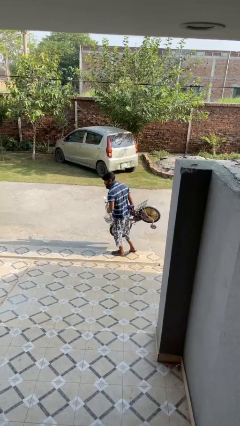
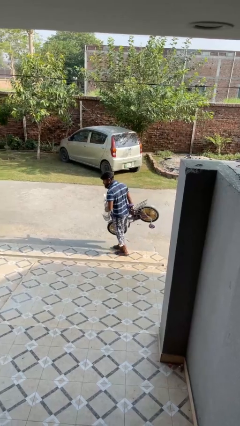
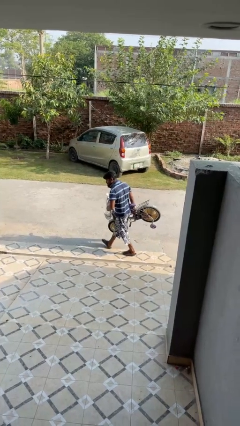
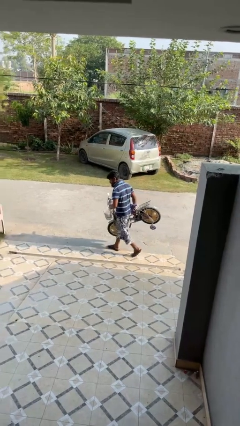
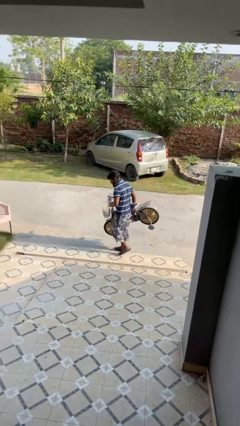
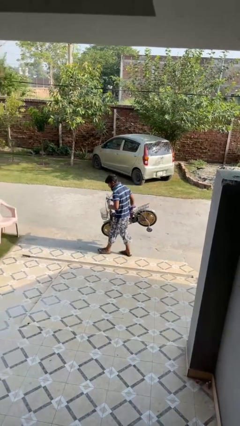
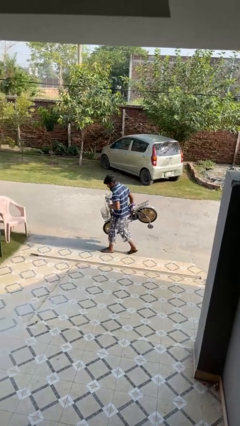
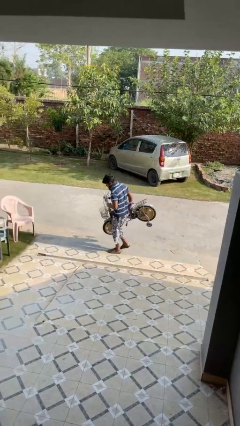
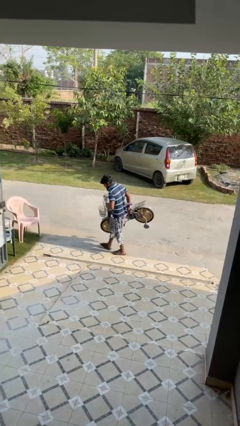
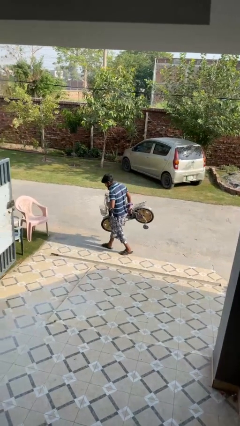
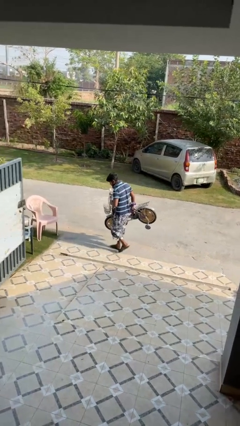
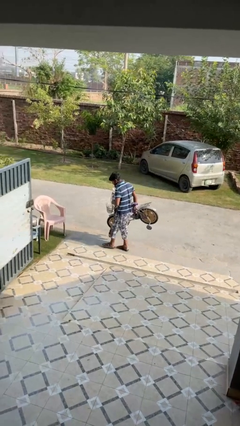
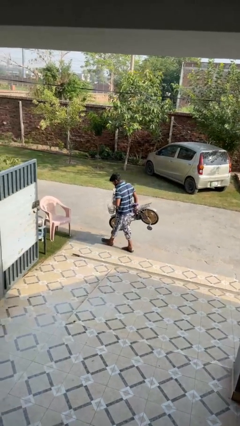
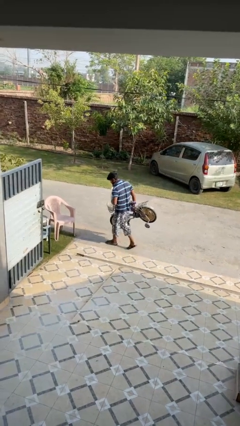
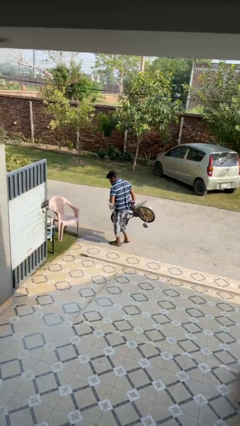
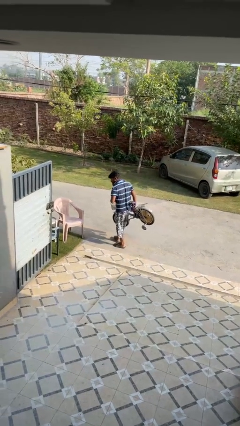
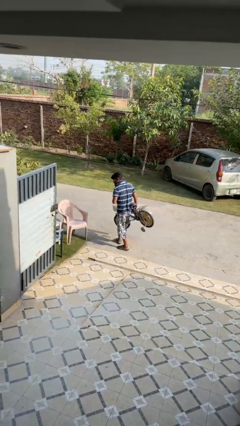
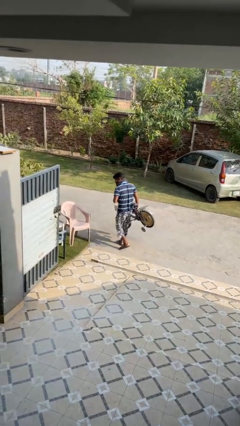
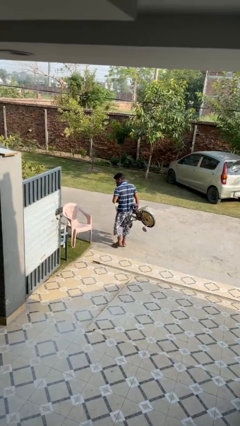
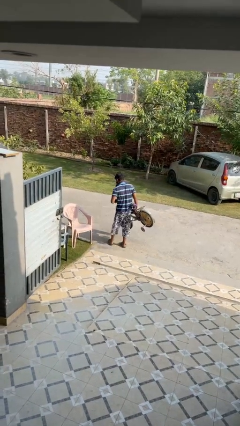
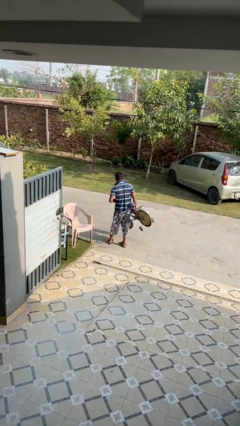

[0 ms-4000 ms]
person carries bicycle

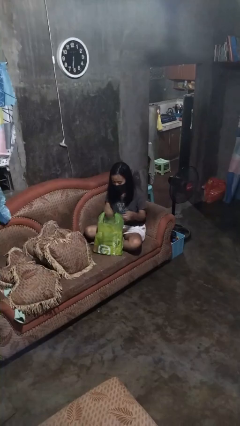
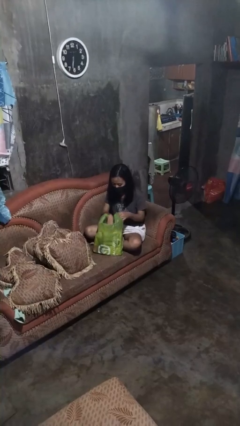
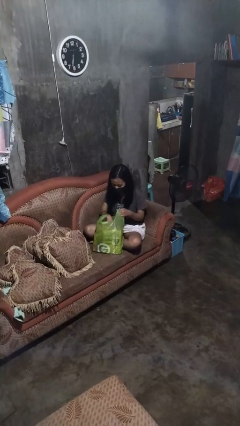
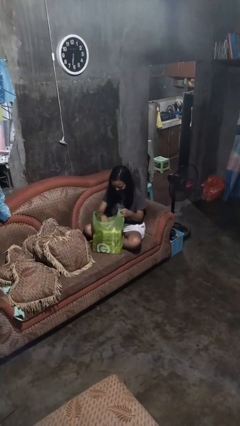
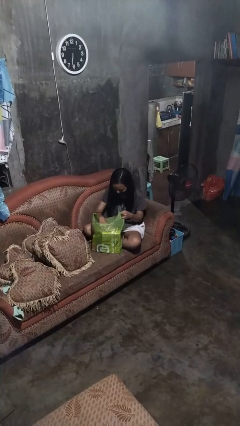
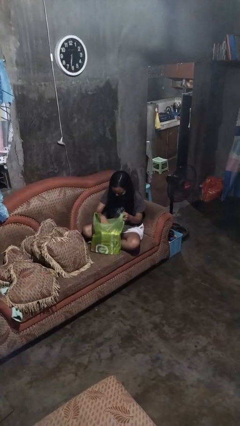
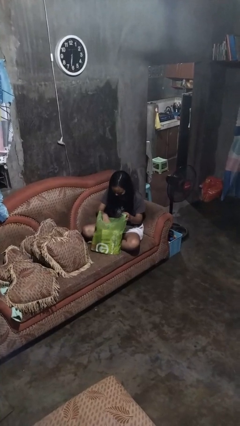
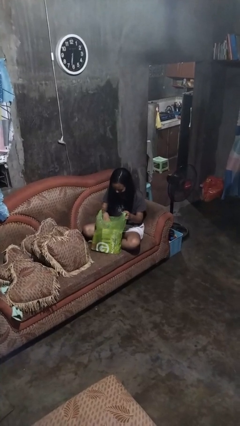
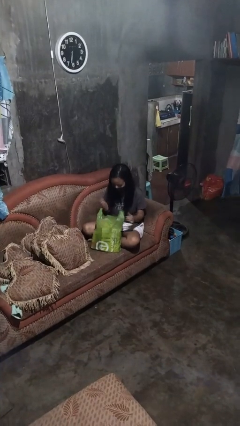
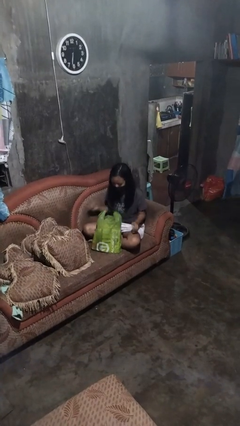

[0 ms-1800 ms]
person searches in bag

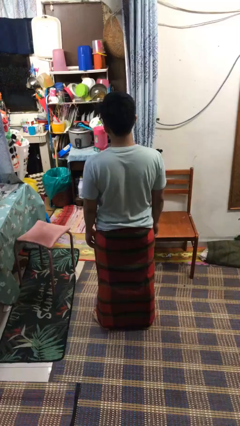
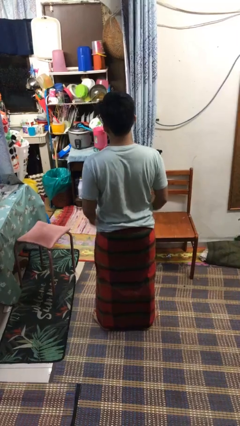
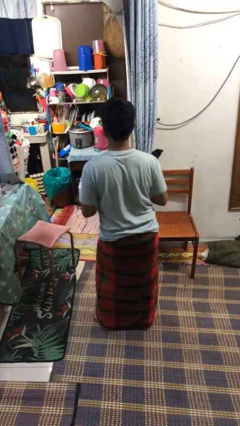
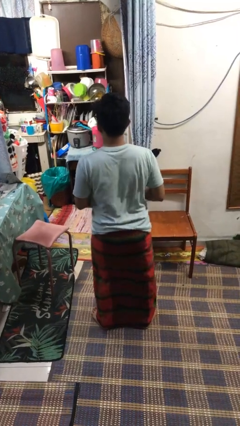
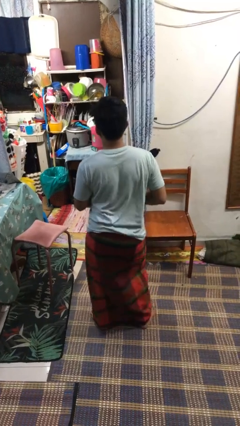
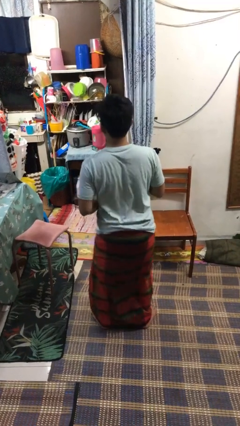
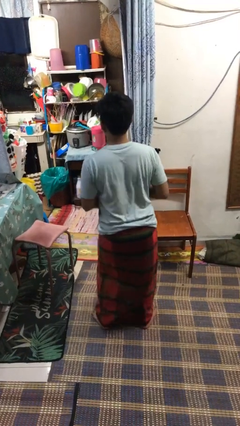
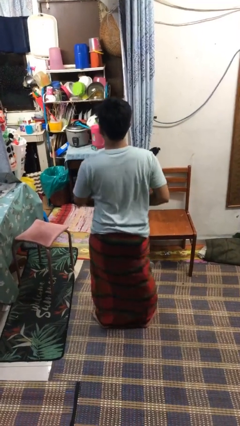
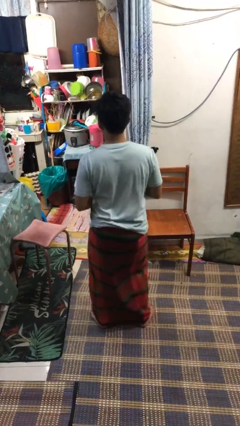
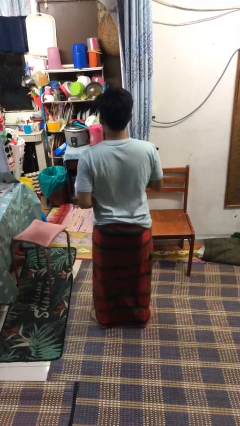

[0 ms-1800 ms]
person wiggles hips

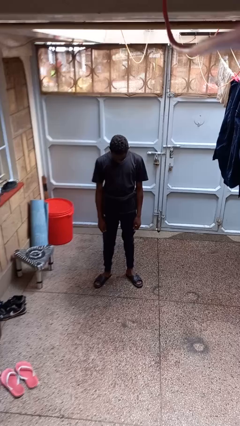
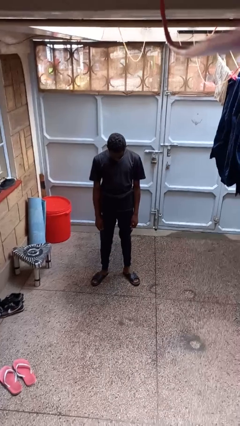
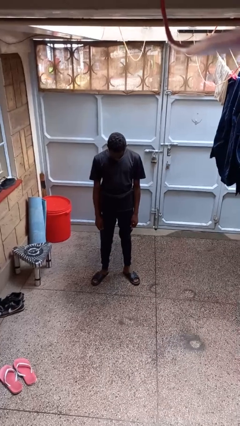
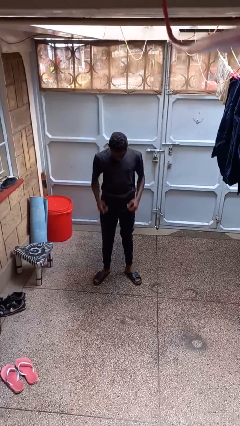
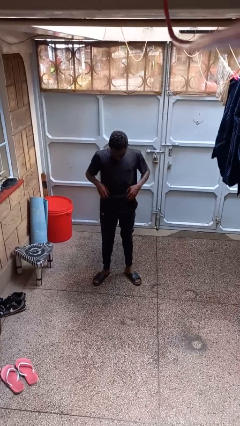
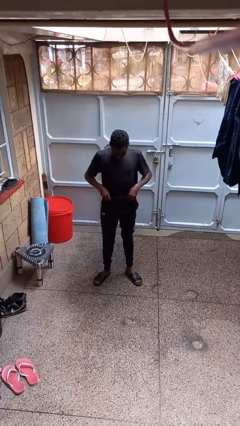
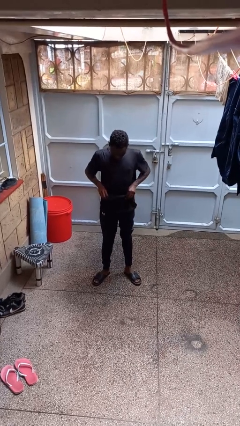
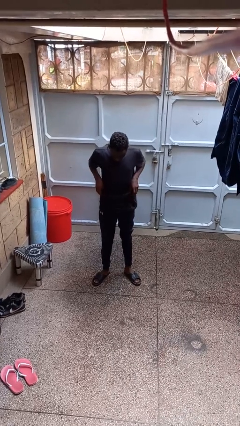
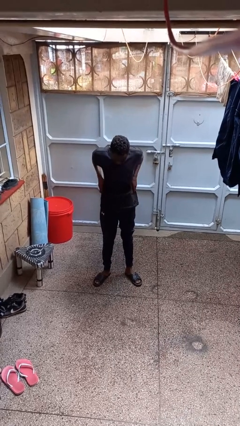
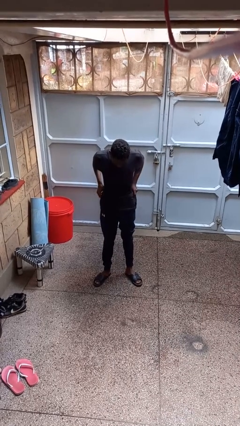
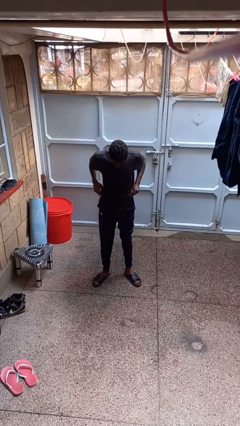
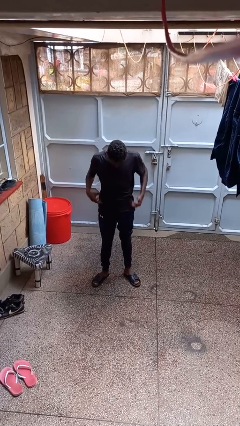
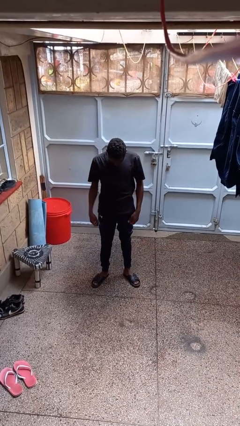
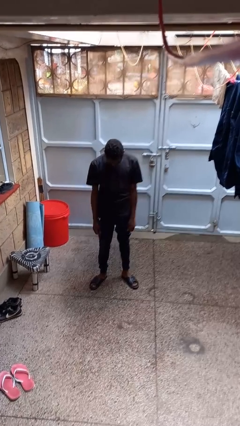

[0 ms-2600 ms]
person hikes up pants

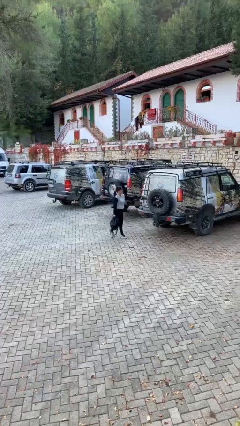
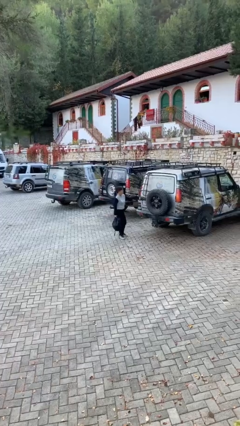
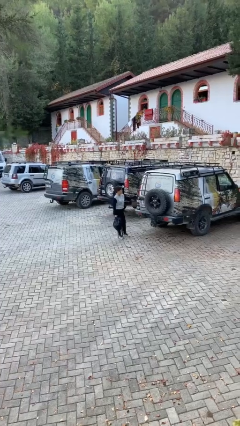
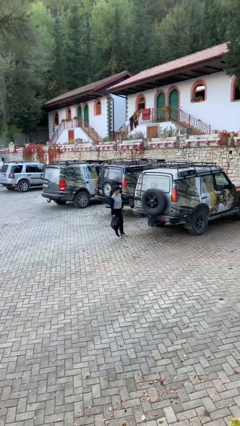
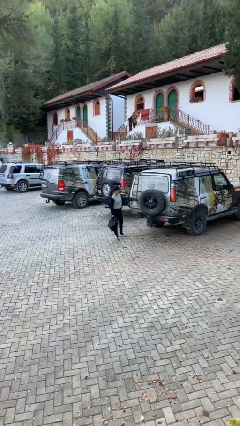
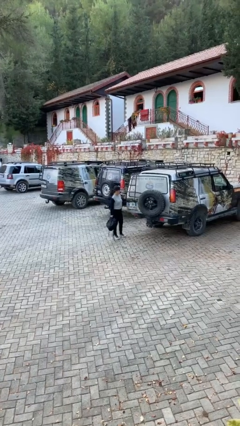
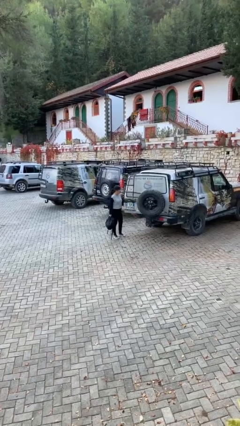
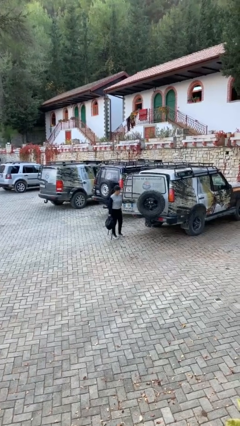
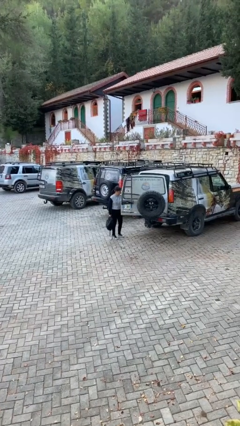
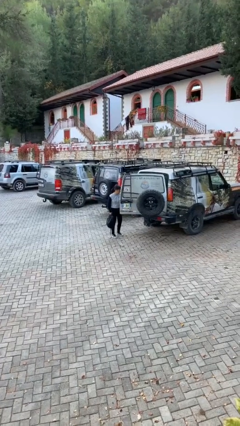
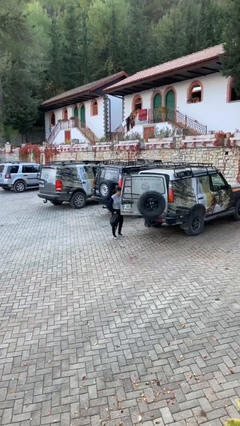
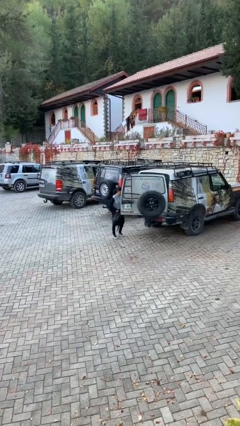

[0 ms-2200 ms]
person opens car trunk

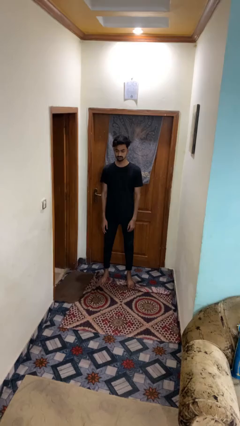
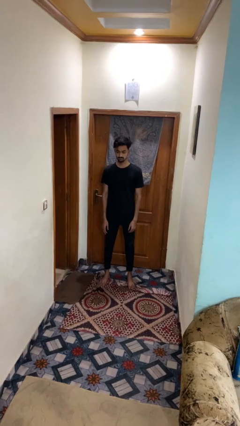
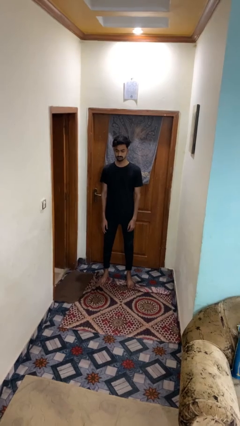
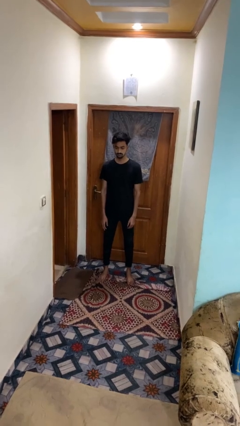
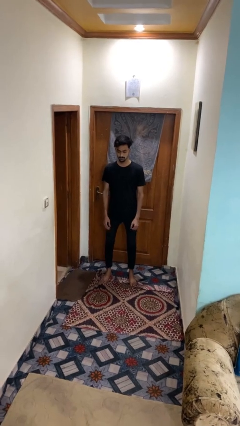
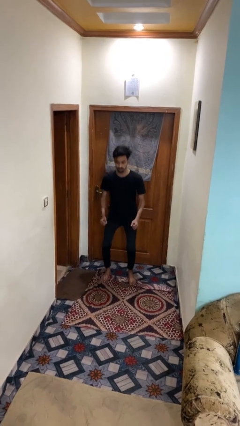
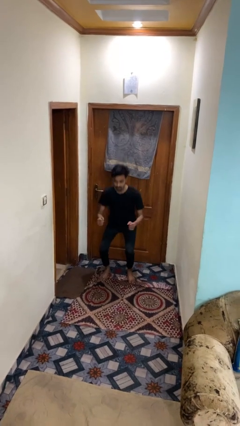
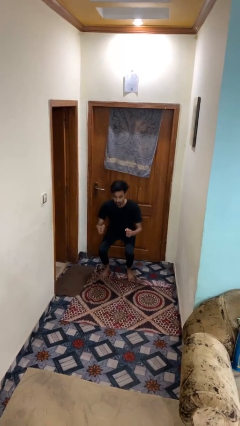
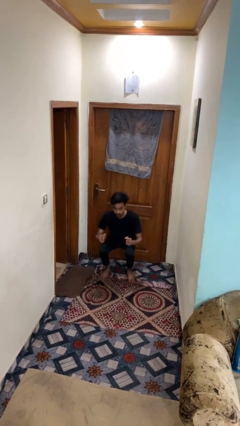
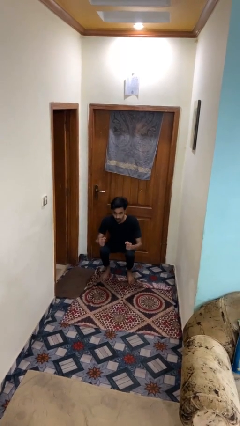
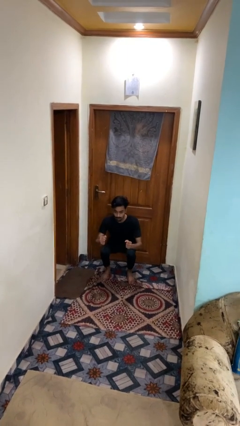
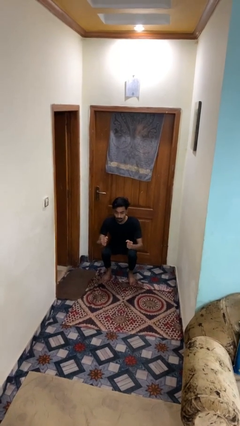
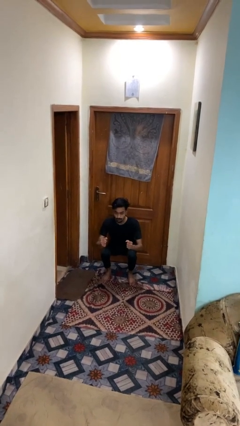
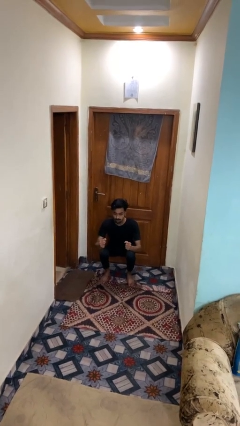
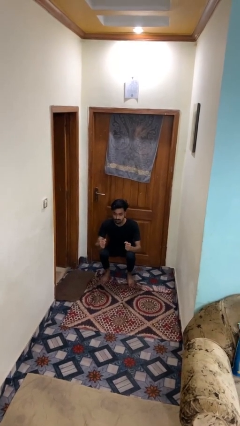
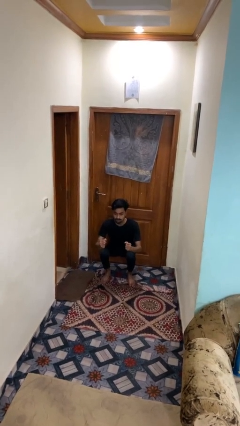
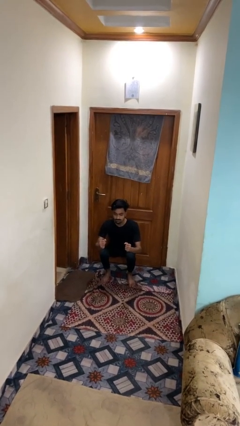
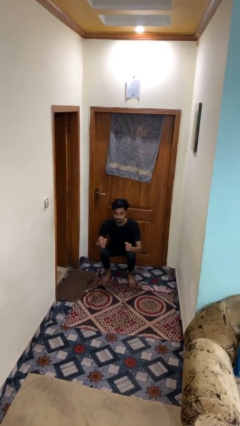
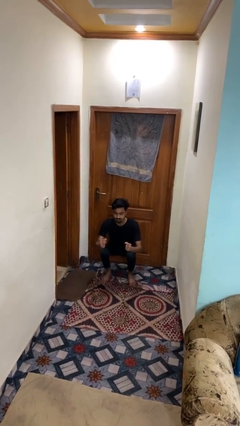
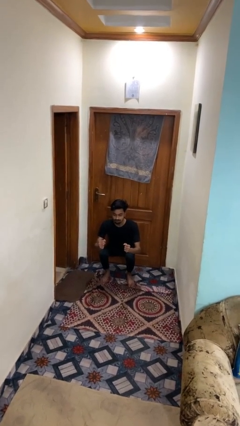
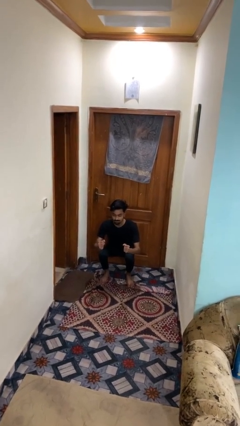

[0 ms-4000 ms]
person squats

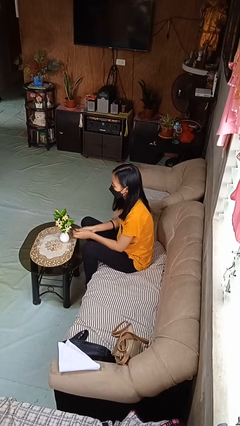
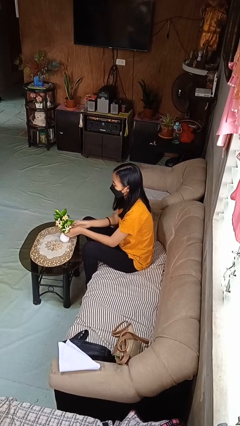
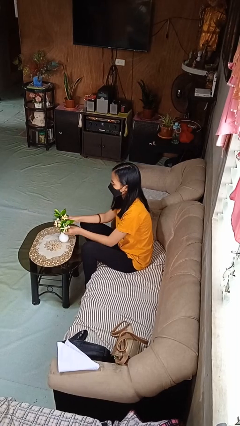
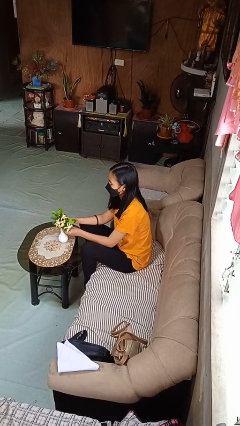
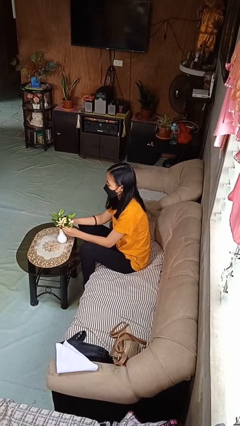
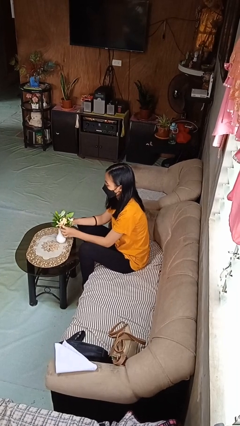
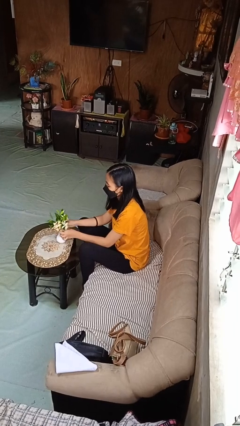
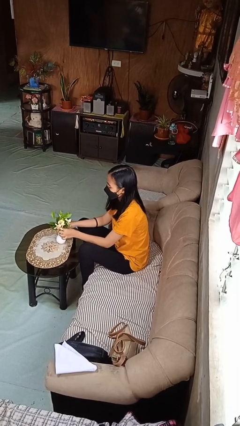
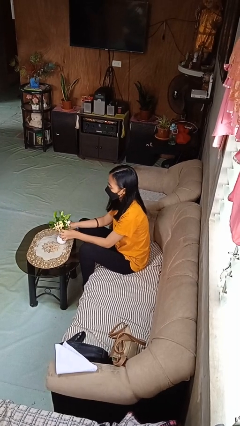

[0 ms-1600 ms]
person arranges flowers in vase
